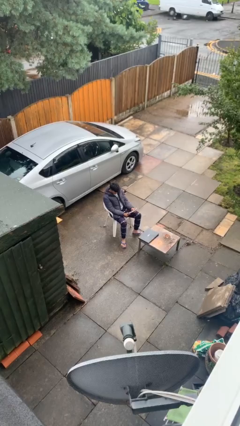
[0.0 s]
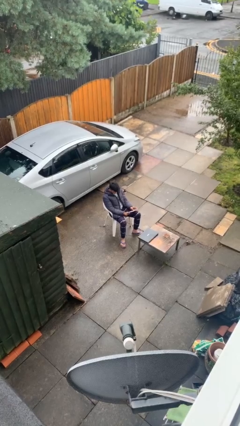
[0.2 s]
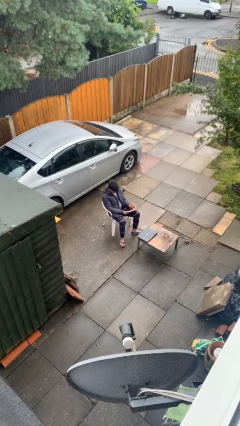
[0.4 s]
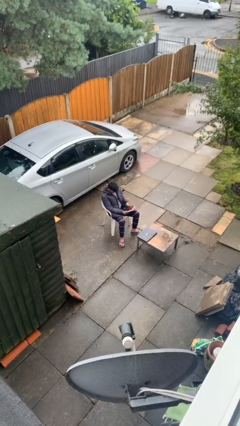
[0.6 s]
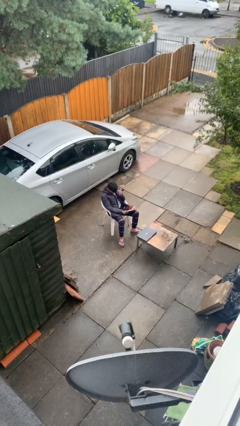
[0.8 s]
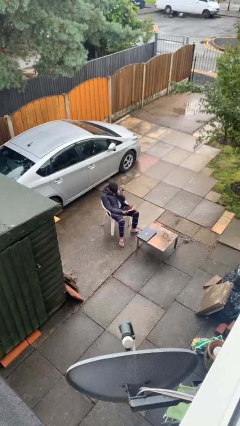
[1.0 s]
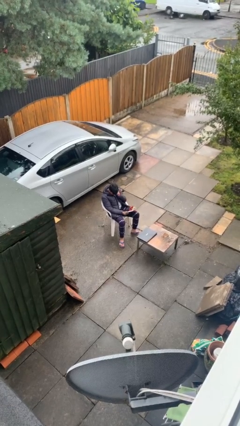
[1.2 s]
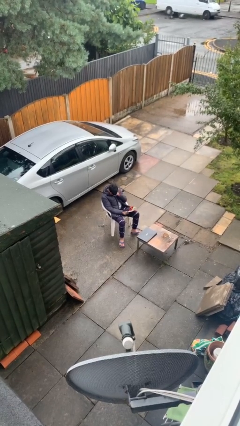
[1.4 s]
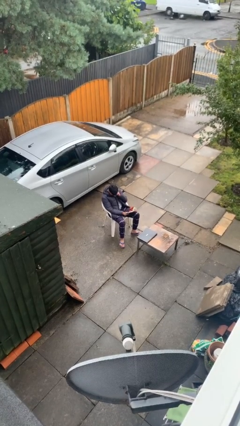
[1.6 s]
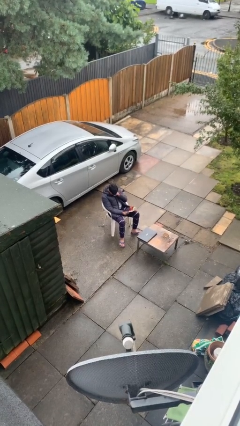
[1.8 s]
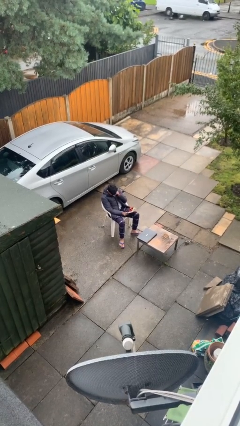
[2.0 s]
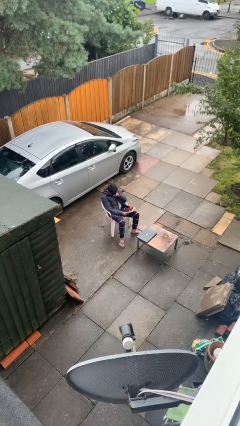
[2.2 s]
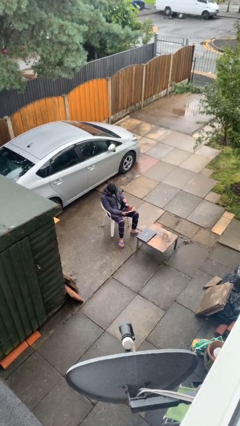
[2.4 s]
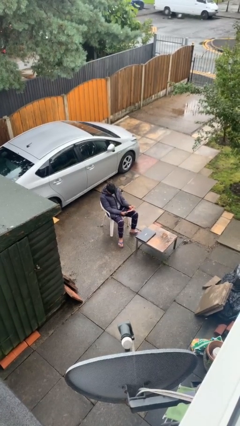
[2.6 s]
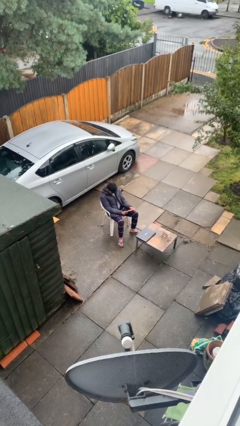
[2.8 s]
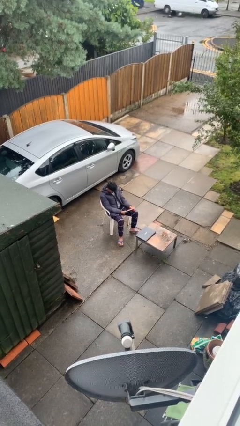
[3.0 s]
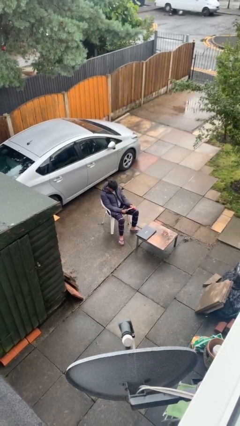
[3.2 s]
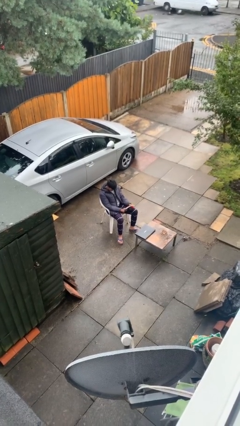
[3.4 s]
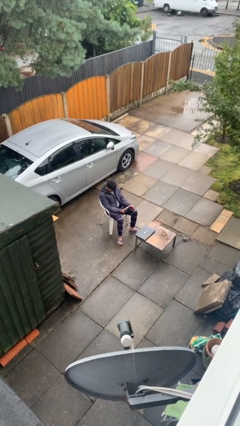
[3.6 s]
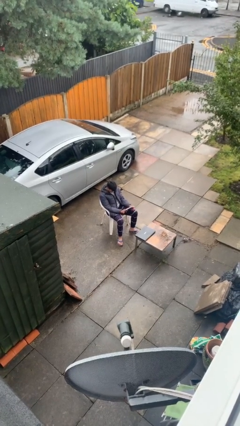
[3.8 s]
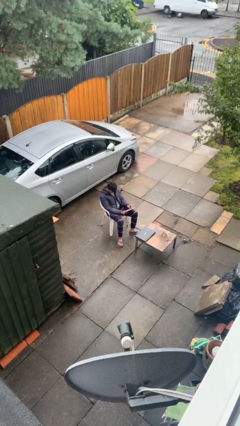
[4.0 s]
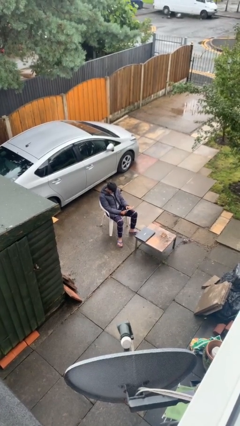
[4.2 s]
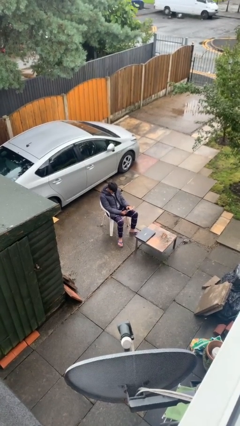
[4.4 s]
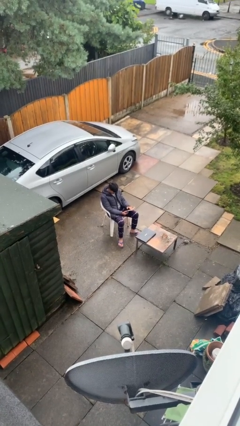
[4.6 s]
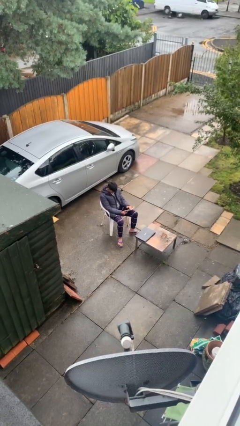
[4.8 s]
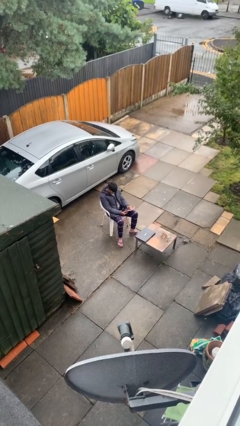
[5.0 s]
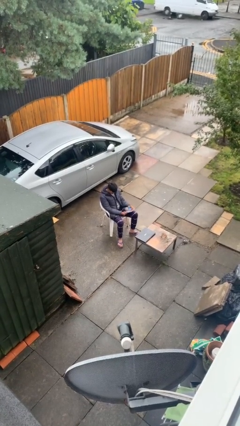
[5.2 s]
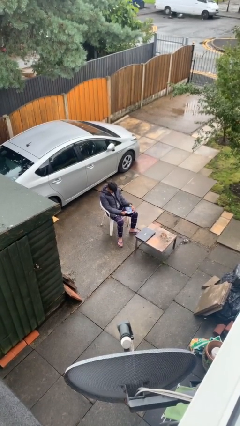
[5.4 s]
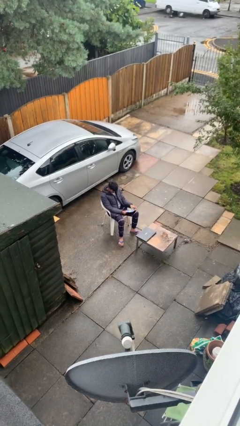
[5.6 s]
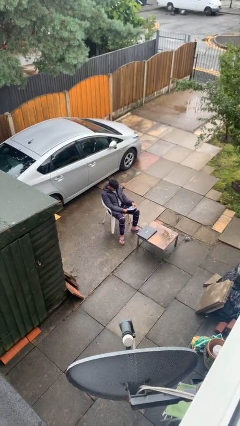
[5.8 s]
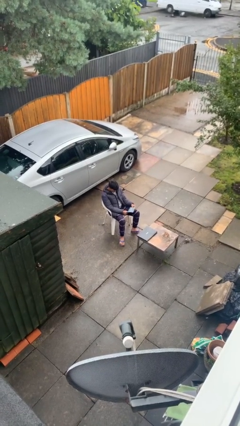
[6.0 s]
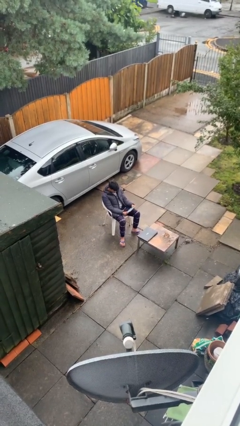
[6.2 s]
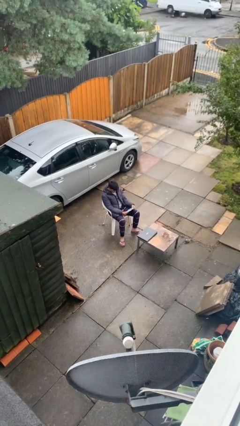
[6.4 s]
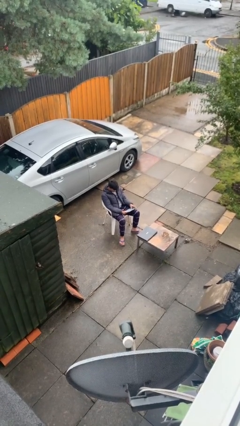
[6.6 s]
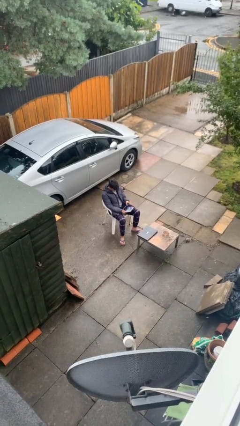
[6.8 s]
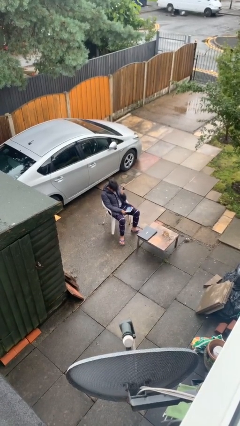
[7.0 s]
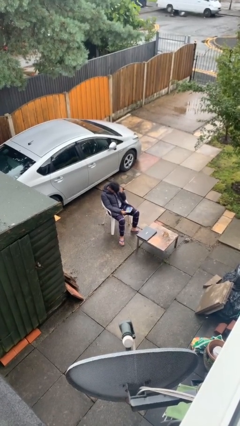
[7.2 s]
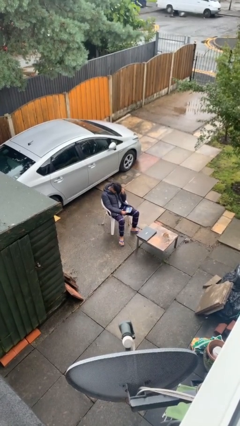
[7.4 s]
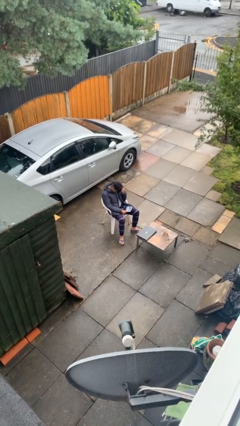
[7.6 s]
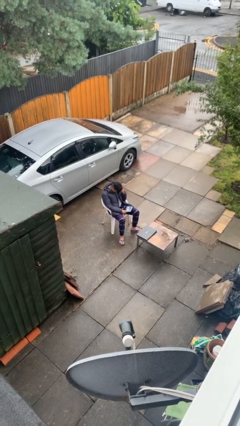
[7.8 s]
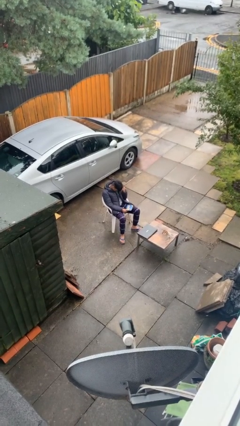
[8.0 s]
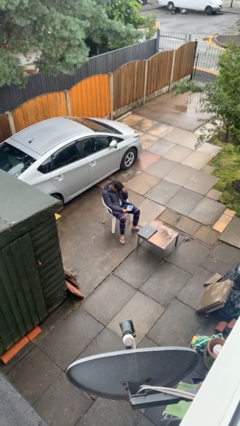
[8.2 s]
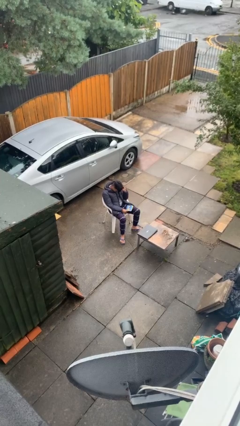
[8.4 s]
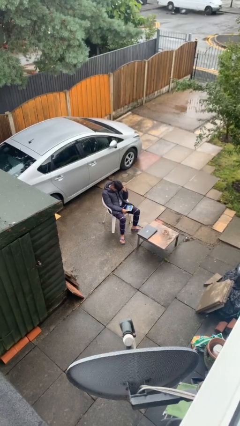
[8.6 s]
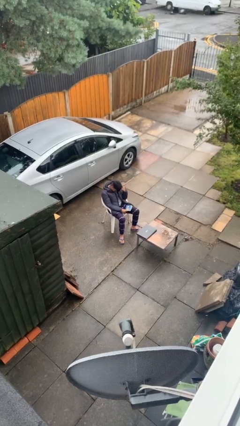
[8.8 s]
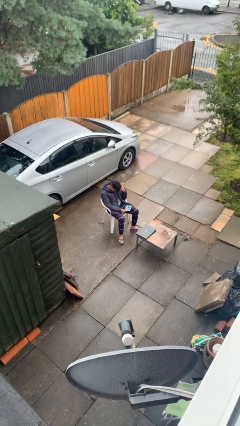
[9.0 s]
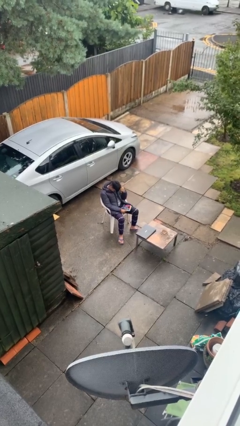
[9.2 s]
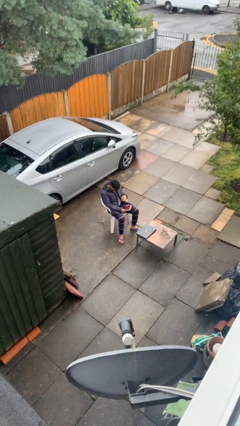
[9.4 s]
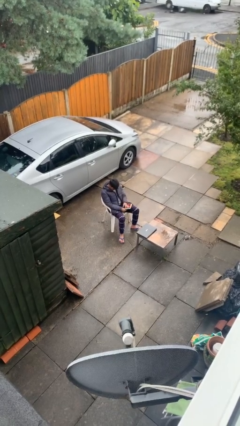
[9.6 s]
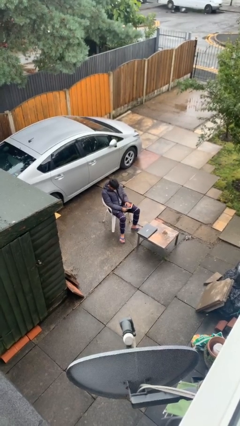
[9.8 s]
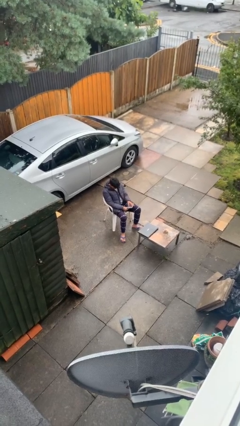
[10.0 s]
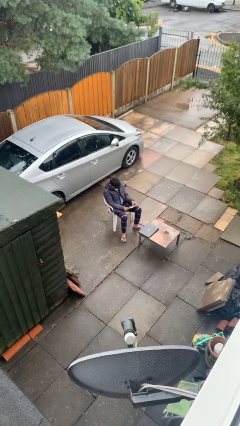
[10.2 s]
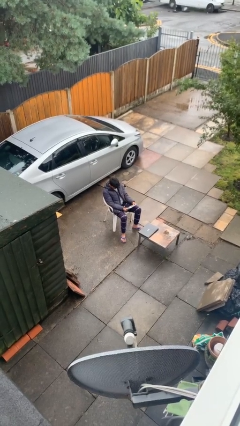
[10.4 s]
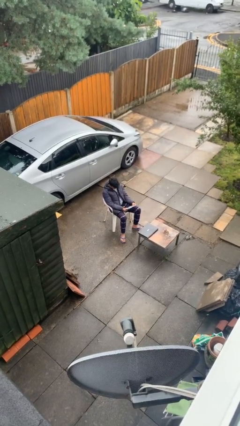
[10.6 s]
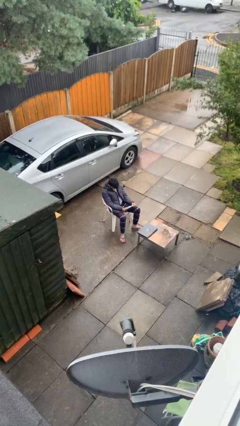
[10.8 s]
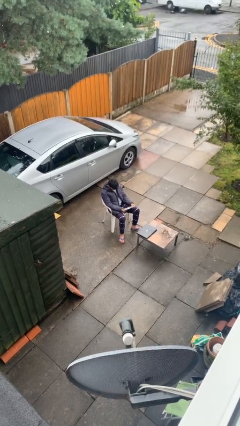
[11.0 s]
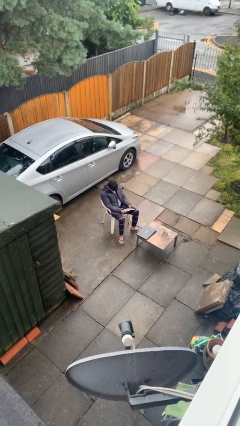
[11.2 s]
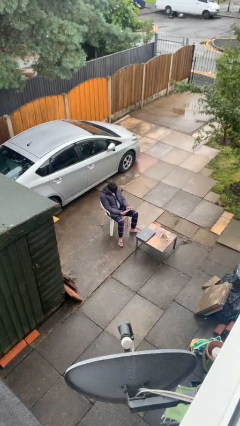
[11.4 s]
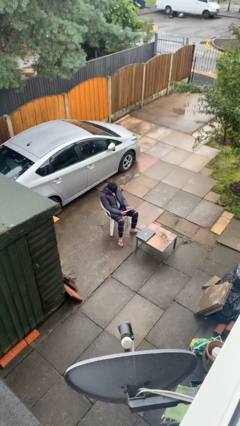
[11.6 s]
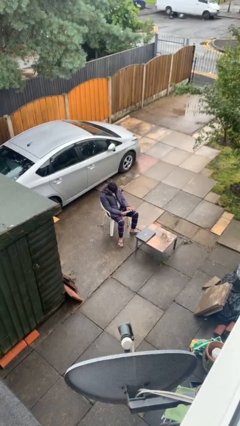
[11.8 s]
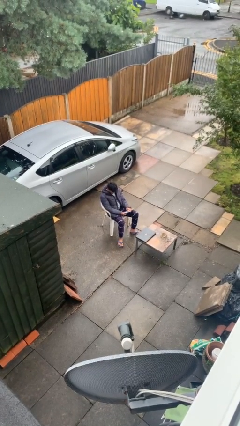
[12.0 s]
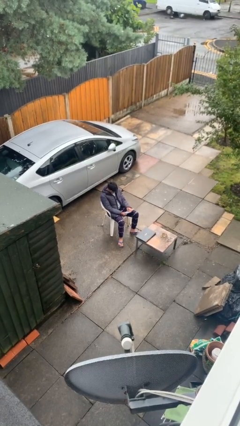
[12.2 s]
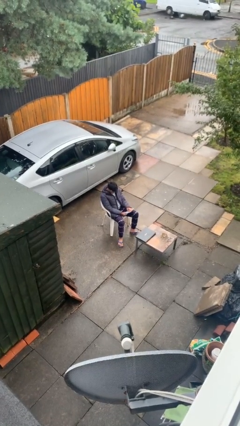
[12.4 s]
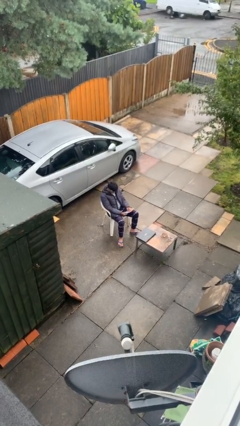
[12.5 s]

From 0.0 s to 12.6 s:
person reads document

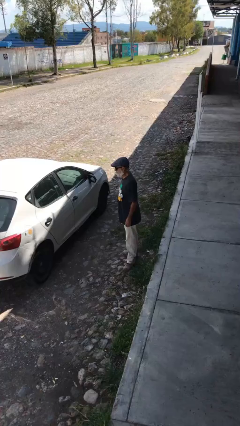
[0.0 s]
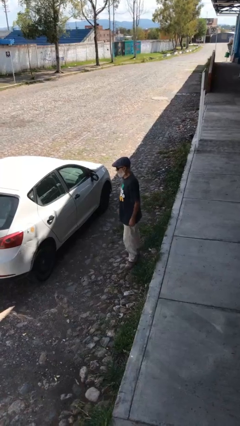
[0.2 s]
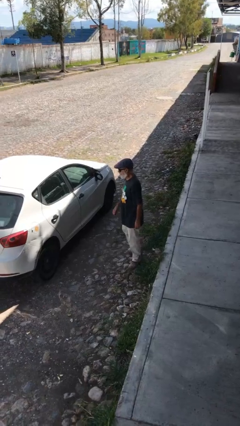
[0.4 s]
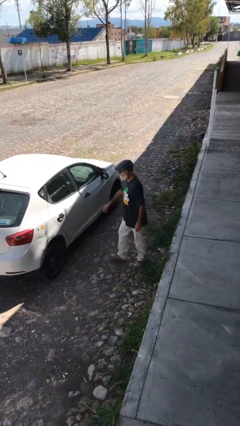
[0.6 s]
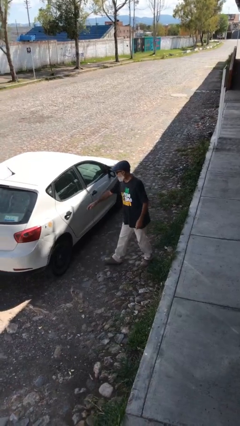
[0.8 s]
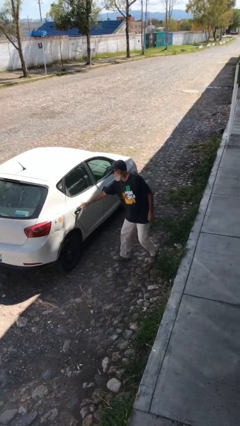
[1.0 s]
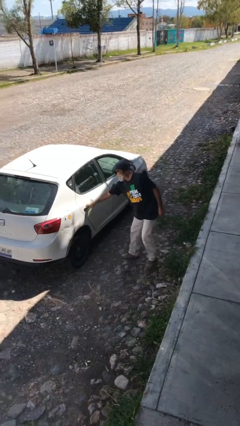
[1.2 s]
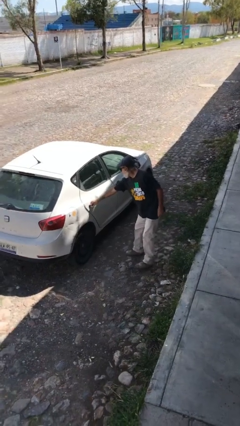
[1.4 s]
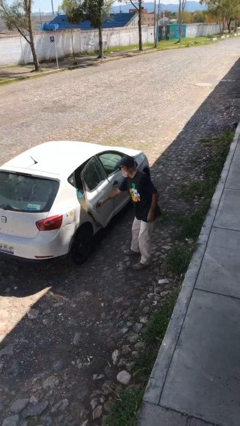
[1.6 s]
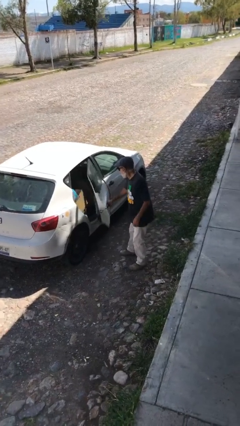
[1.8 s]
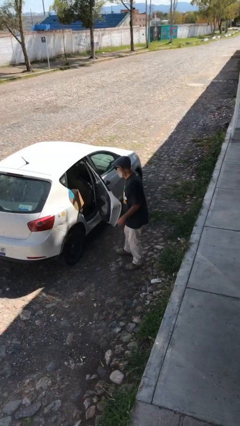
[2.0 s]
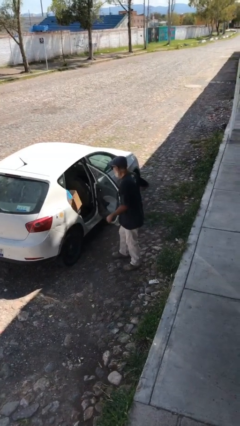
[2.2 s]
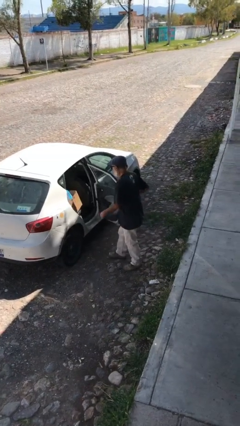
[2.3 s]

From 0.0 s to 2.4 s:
person opens car door

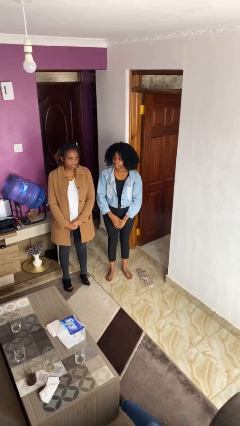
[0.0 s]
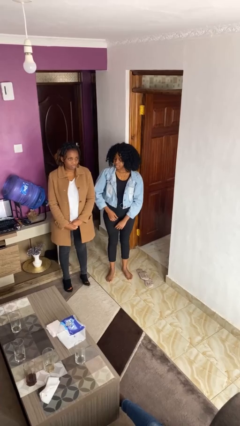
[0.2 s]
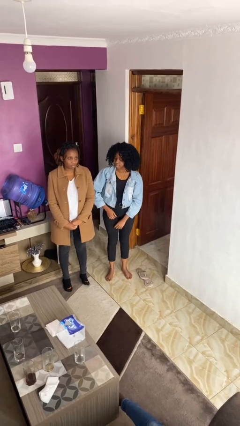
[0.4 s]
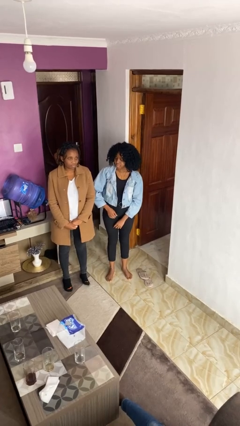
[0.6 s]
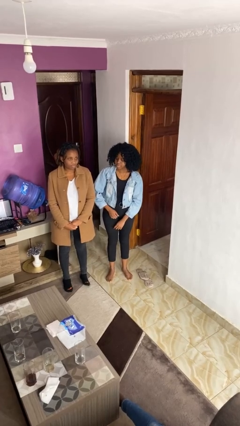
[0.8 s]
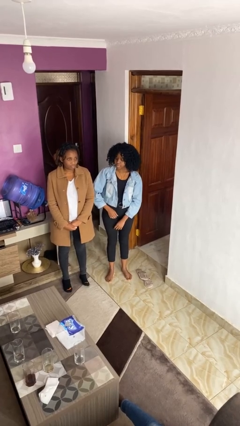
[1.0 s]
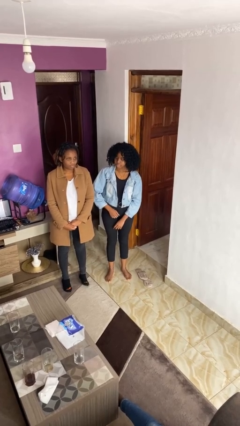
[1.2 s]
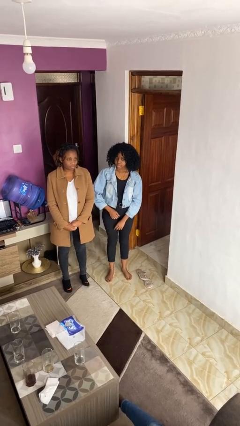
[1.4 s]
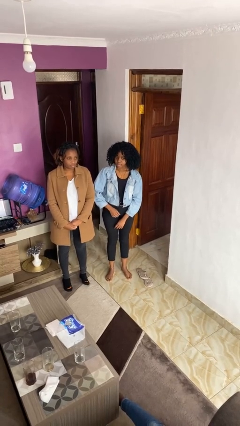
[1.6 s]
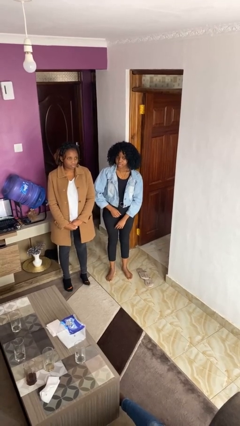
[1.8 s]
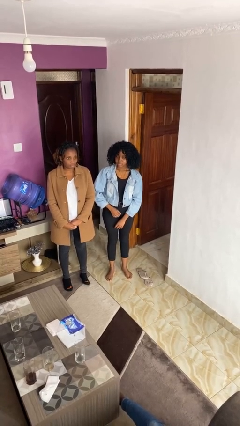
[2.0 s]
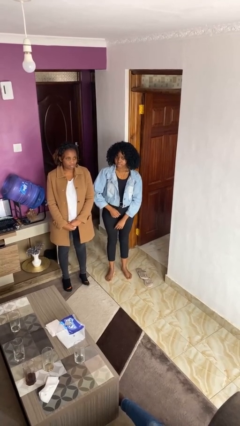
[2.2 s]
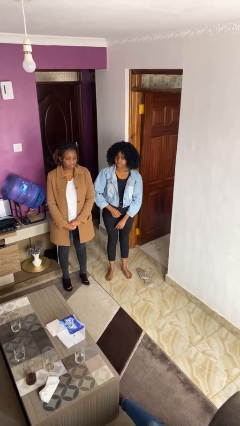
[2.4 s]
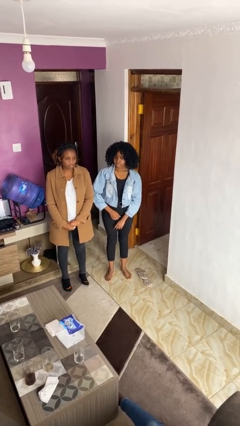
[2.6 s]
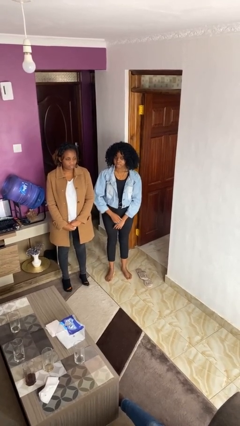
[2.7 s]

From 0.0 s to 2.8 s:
person nudges person with elbow
